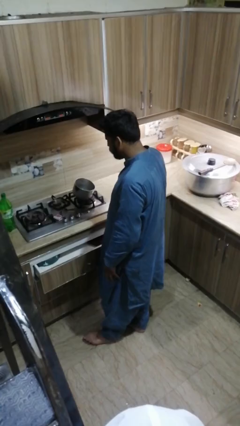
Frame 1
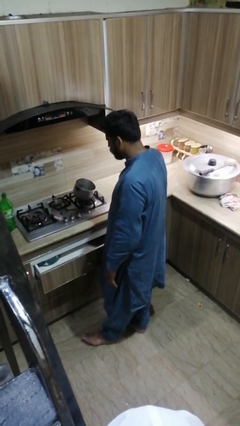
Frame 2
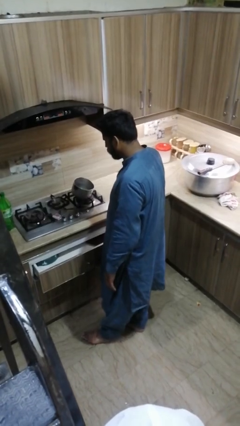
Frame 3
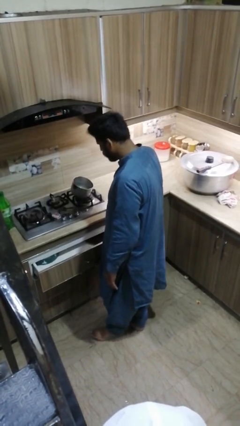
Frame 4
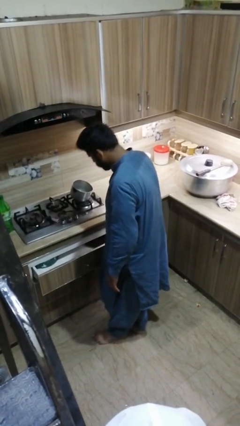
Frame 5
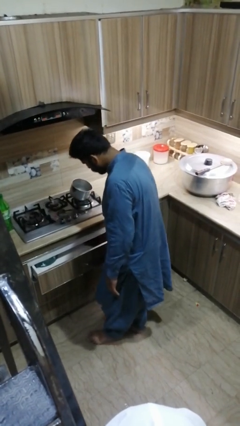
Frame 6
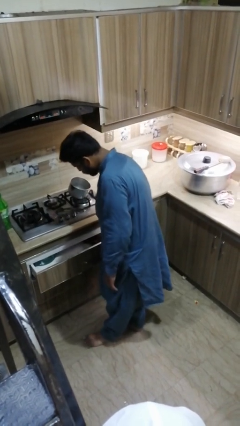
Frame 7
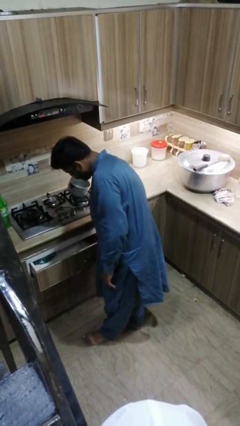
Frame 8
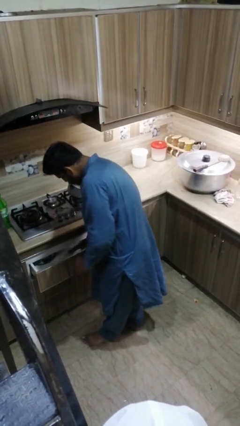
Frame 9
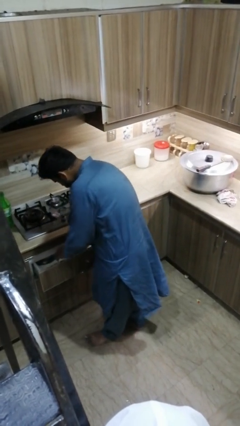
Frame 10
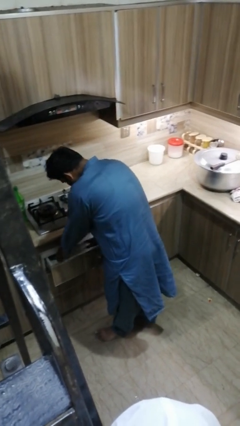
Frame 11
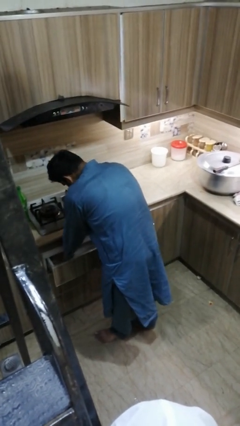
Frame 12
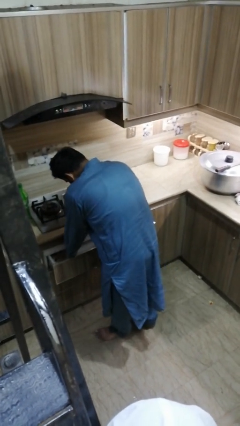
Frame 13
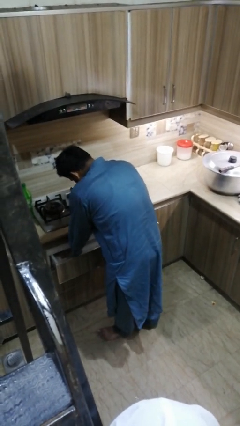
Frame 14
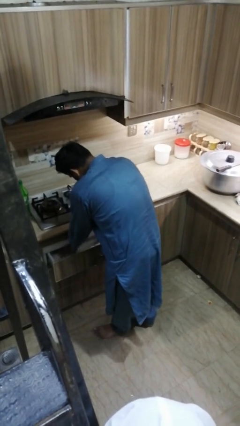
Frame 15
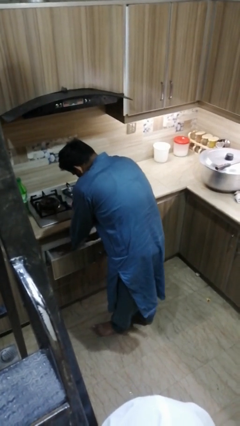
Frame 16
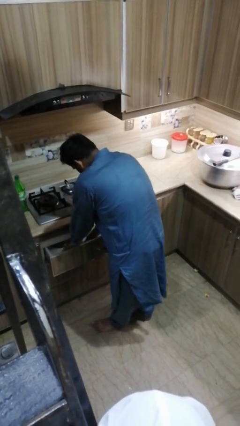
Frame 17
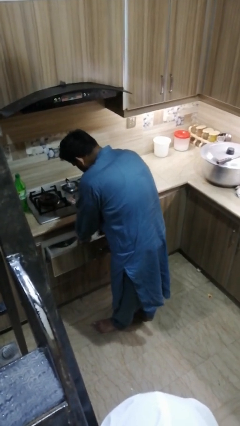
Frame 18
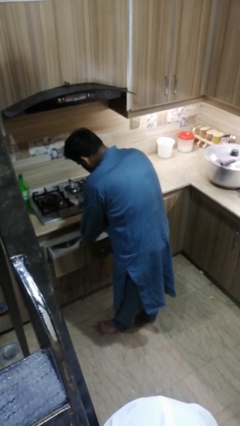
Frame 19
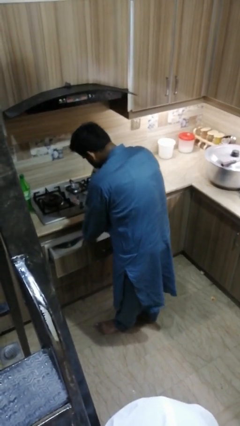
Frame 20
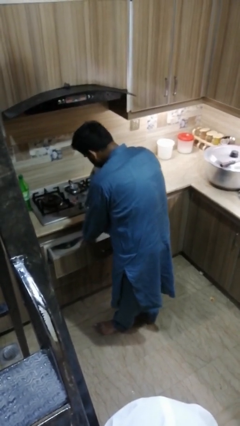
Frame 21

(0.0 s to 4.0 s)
person searches in kitchen drawer

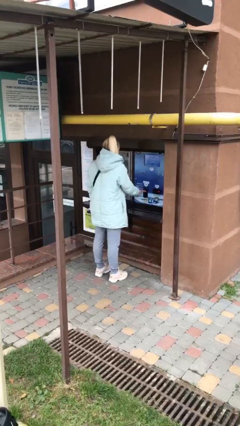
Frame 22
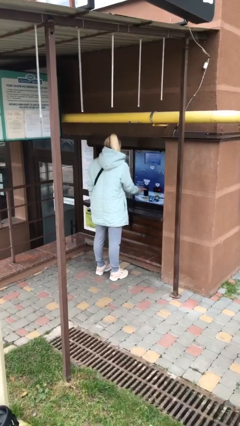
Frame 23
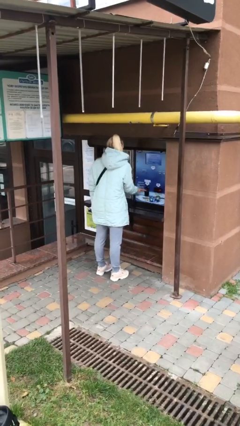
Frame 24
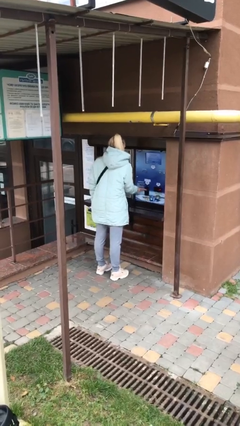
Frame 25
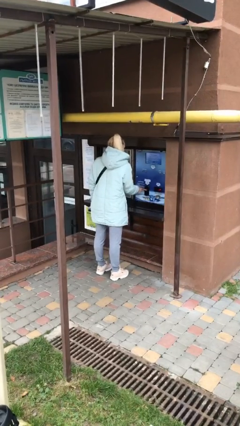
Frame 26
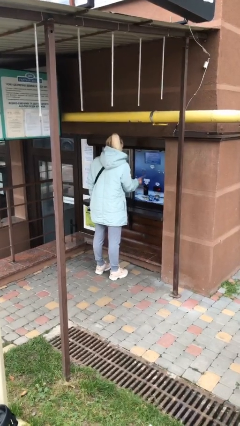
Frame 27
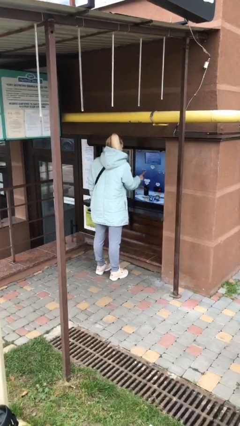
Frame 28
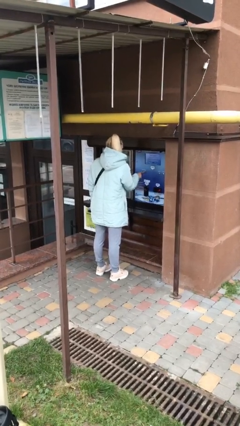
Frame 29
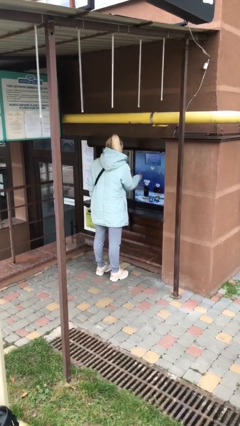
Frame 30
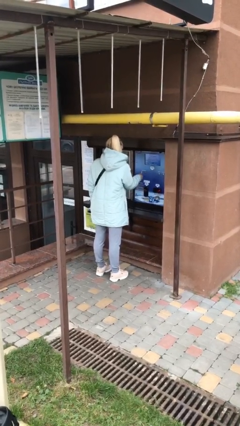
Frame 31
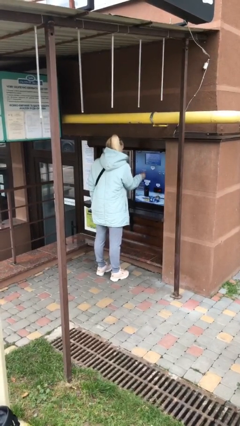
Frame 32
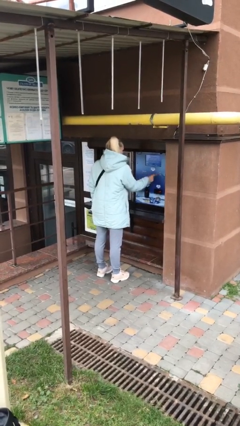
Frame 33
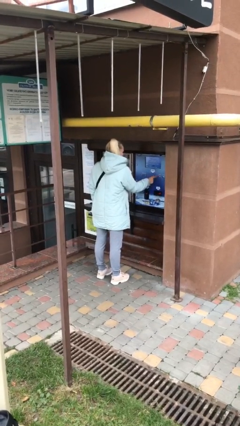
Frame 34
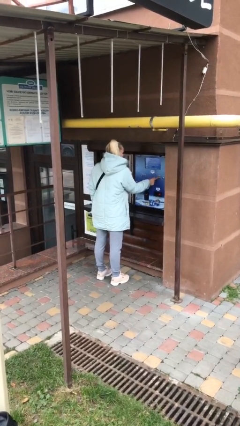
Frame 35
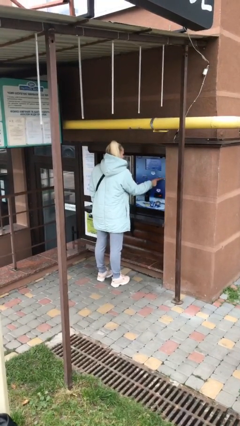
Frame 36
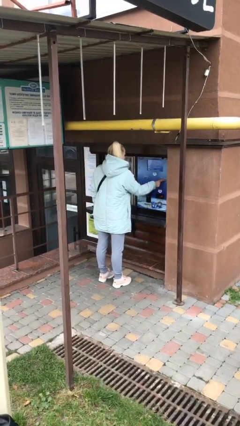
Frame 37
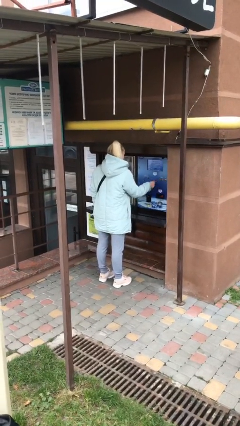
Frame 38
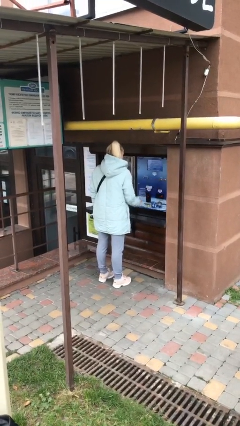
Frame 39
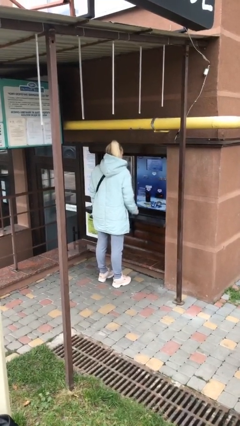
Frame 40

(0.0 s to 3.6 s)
person purchases from machine

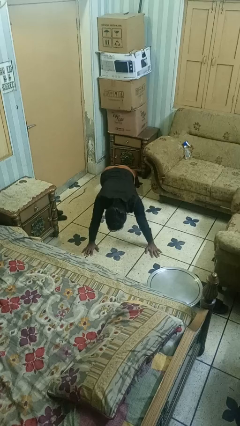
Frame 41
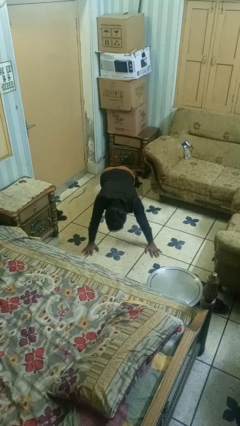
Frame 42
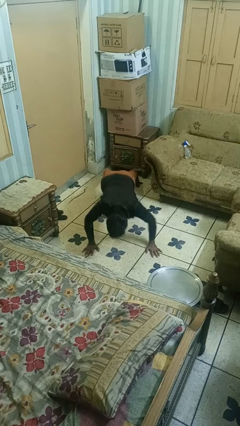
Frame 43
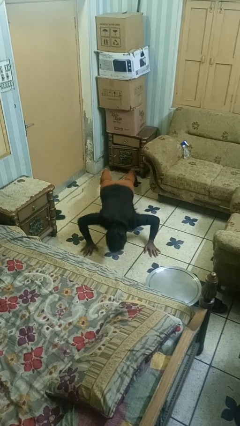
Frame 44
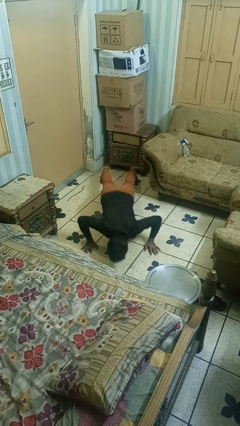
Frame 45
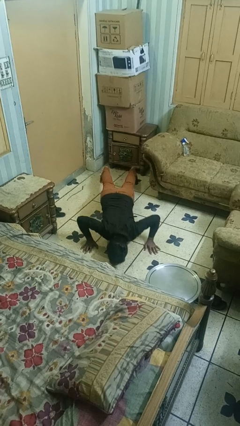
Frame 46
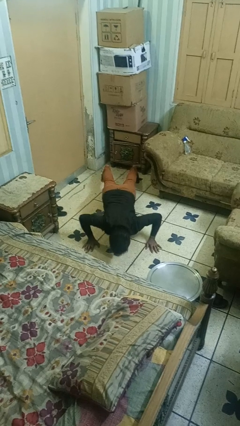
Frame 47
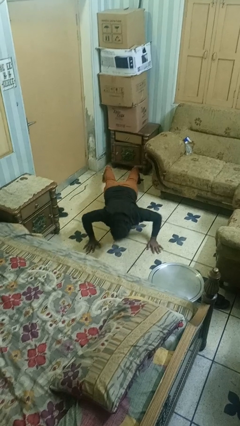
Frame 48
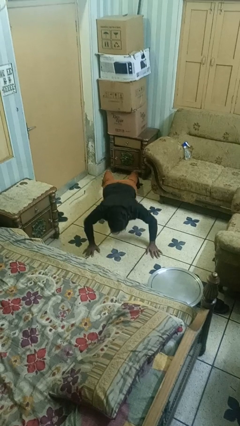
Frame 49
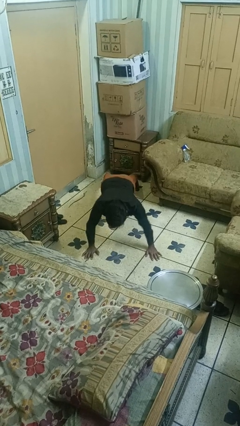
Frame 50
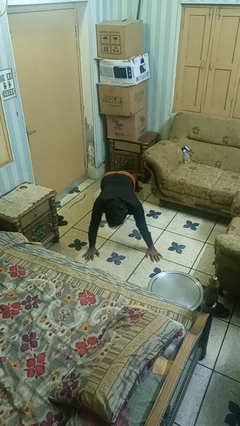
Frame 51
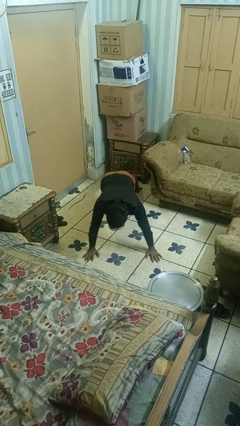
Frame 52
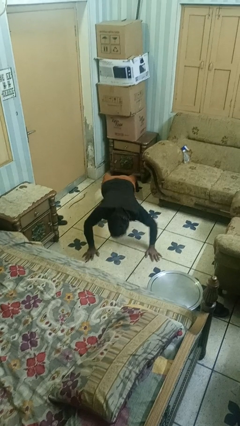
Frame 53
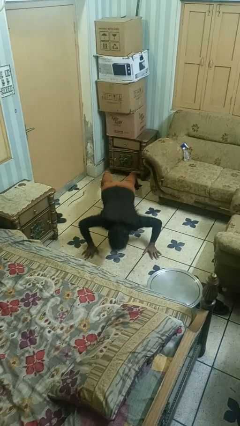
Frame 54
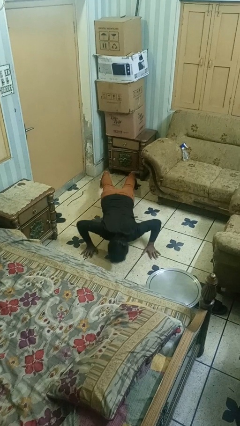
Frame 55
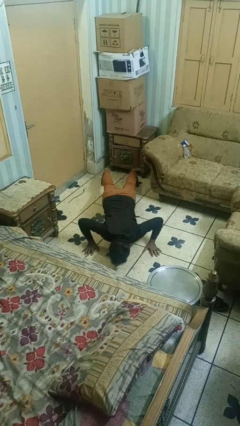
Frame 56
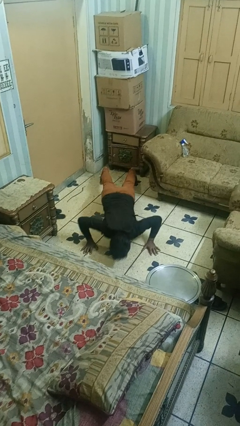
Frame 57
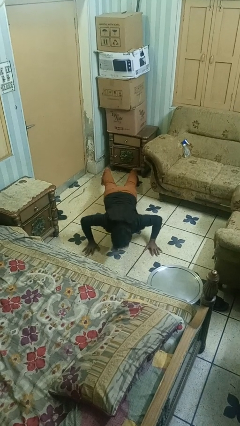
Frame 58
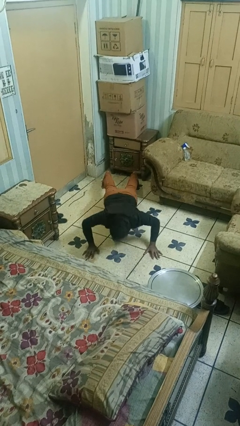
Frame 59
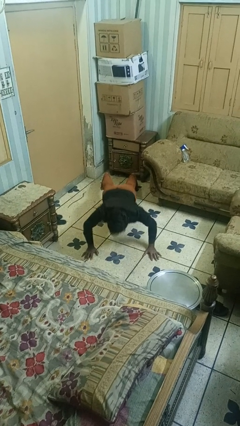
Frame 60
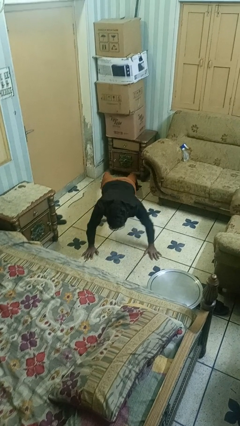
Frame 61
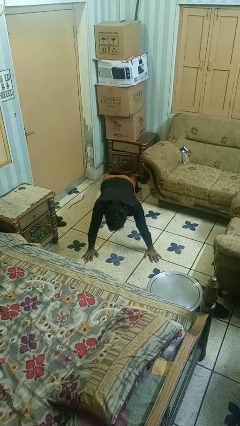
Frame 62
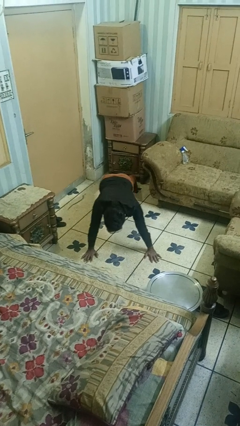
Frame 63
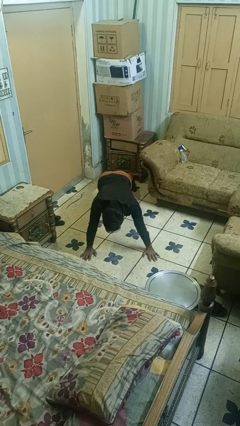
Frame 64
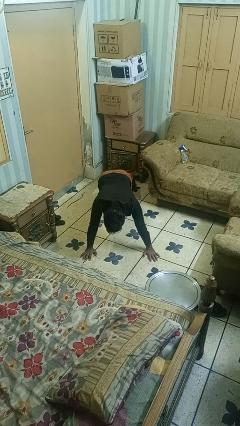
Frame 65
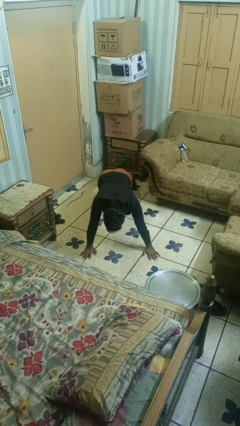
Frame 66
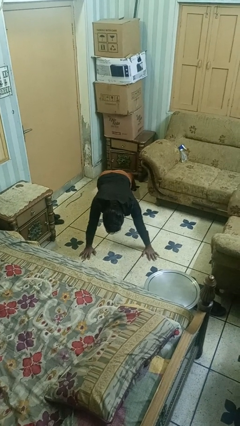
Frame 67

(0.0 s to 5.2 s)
person exercises with pushup

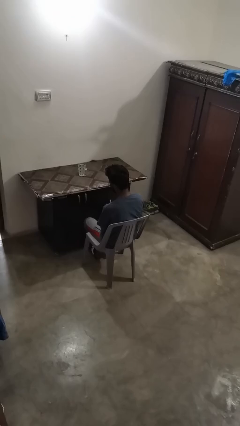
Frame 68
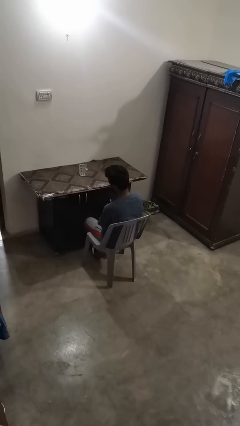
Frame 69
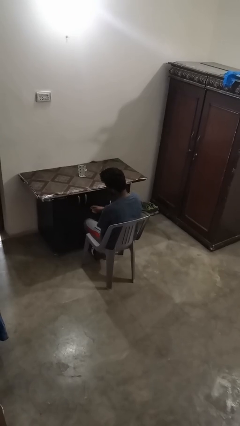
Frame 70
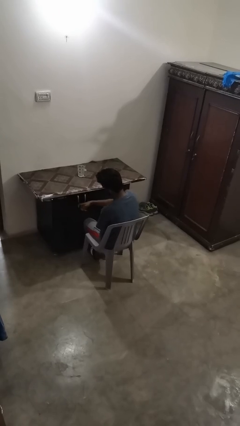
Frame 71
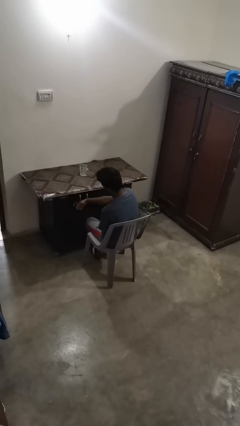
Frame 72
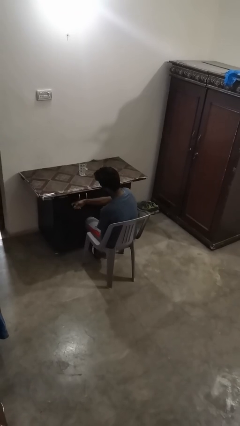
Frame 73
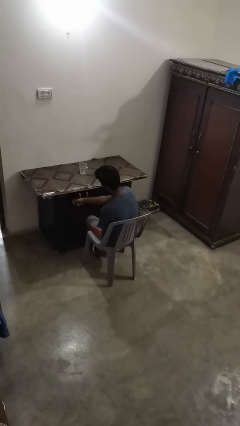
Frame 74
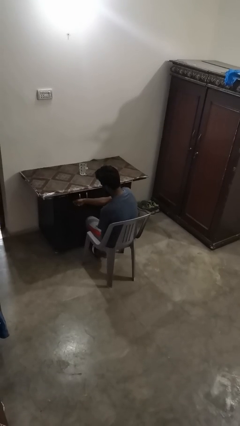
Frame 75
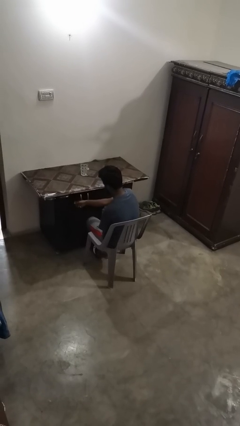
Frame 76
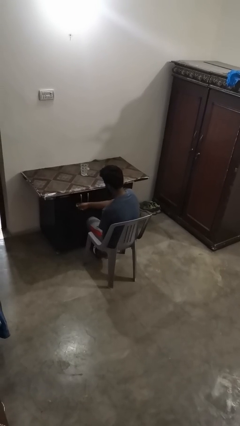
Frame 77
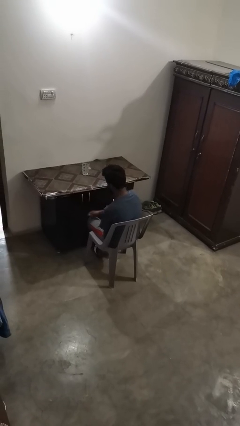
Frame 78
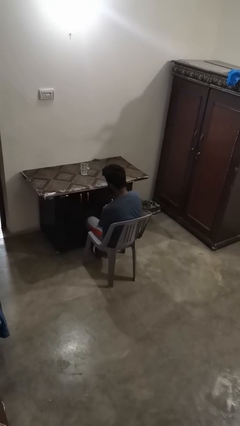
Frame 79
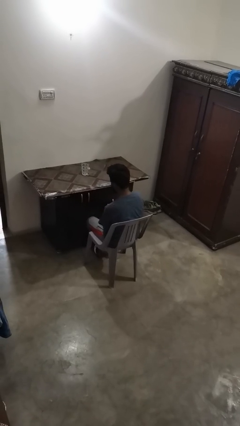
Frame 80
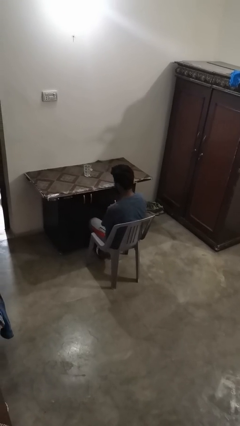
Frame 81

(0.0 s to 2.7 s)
person knocks over furniture

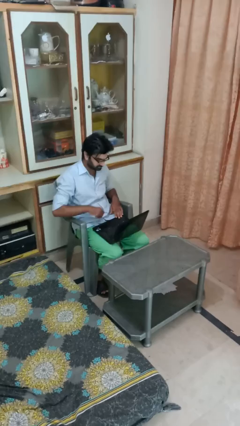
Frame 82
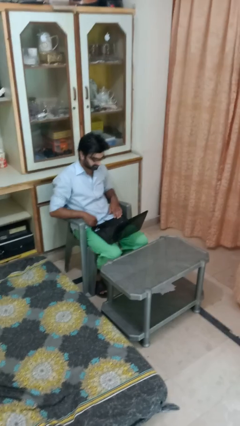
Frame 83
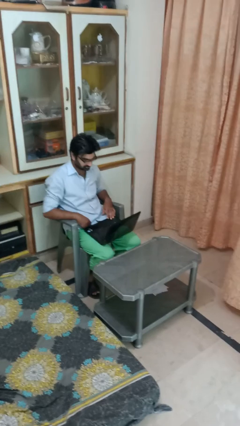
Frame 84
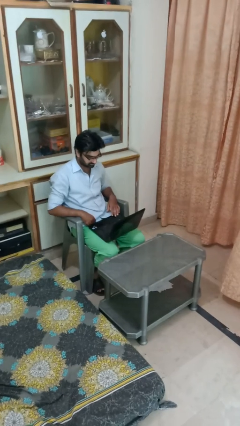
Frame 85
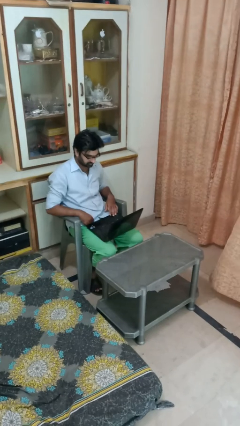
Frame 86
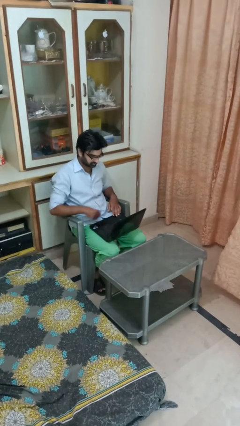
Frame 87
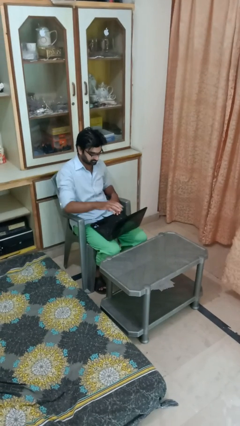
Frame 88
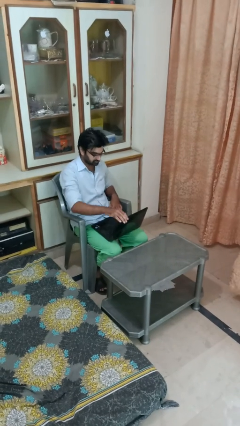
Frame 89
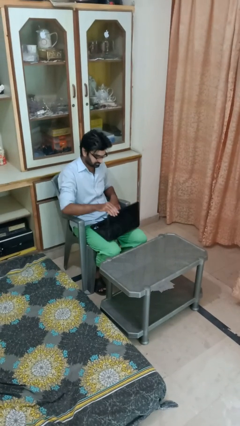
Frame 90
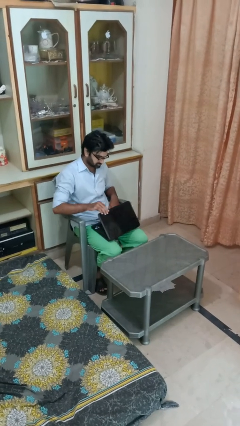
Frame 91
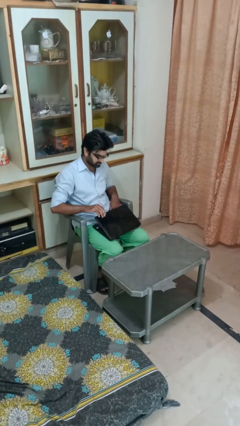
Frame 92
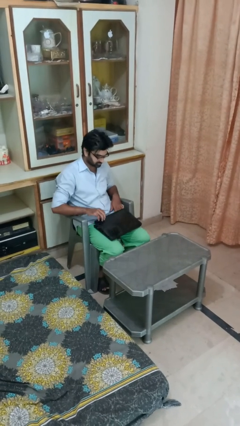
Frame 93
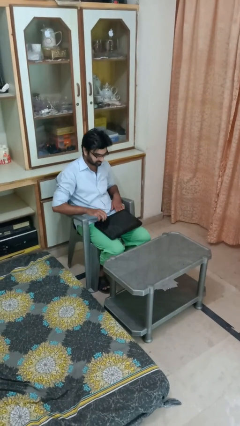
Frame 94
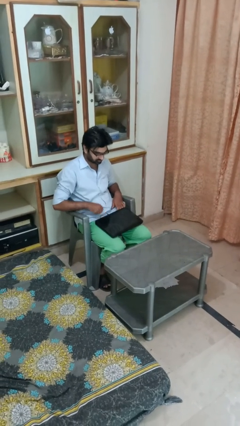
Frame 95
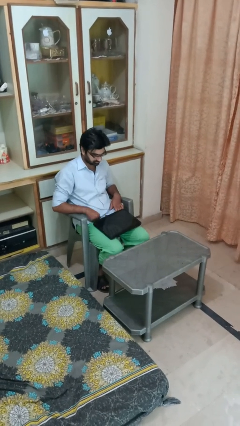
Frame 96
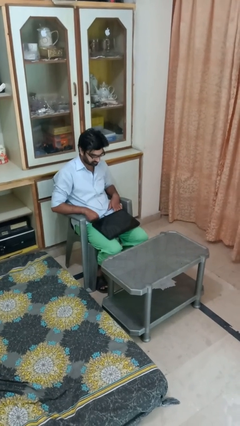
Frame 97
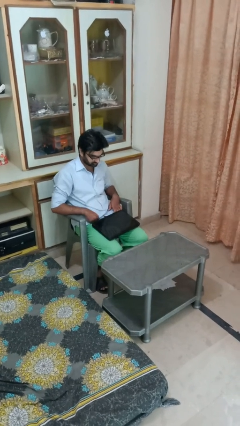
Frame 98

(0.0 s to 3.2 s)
person closes laptop
